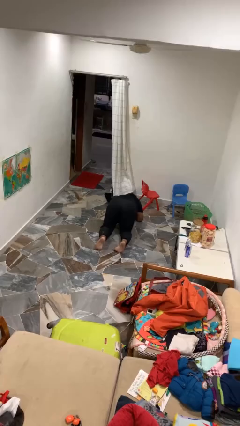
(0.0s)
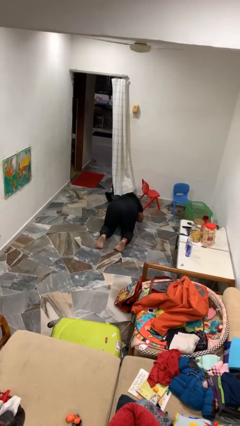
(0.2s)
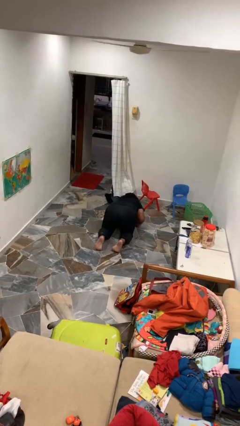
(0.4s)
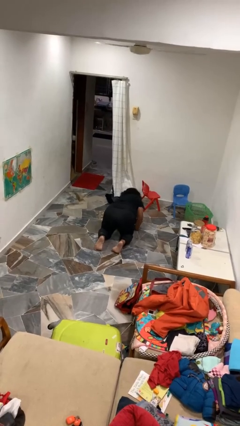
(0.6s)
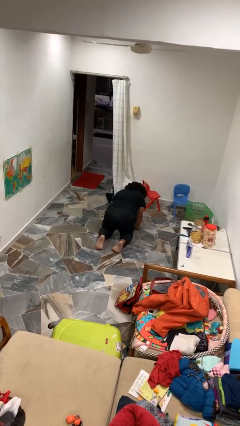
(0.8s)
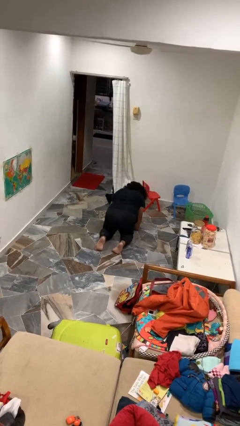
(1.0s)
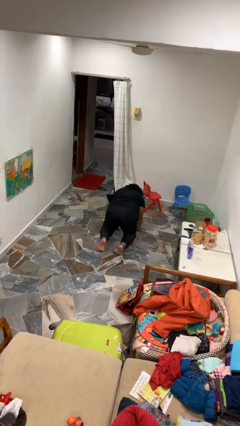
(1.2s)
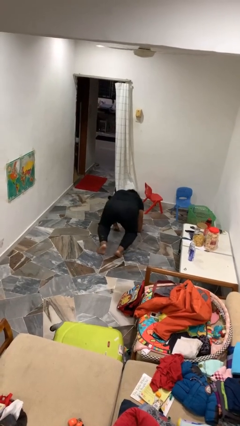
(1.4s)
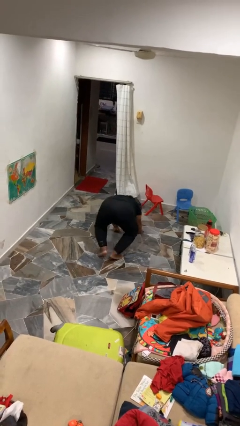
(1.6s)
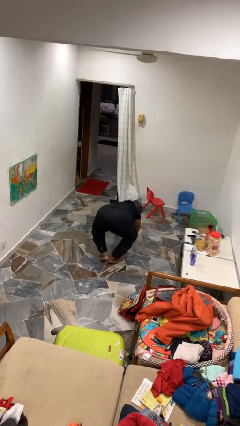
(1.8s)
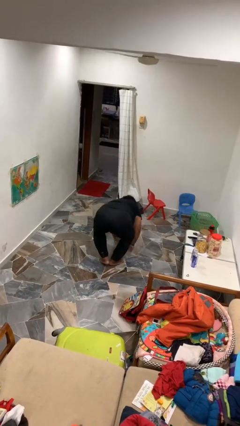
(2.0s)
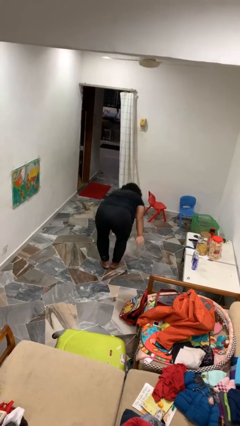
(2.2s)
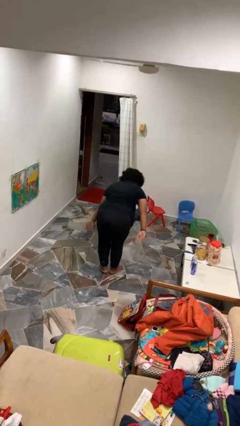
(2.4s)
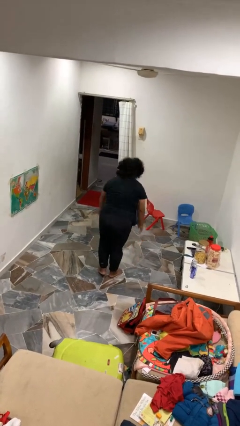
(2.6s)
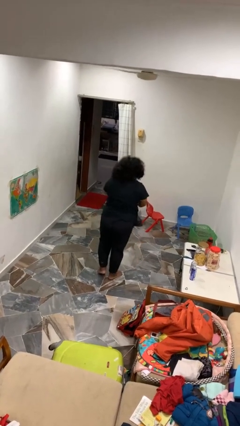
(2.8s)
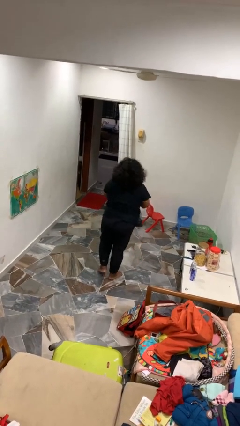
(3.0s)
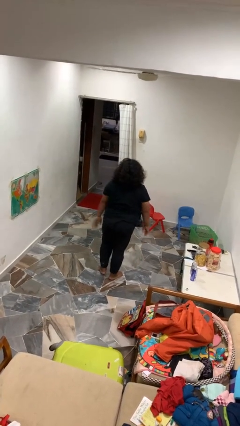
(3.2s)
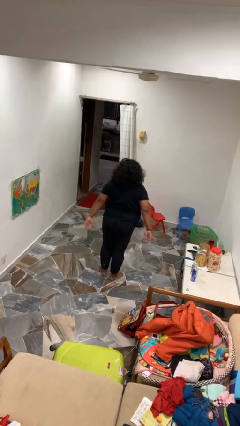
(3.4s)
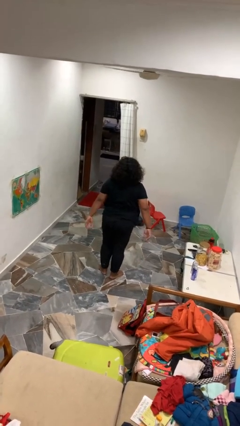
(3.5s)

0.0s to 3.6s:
person stands up from floor

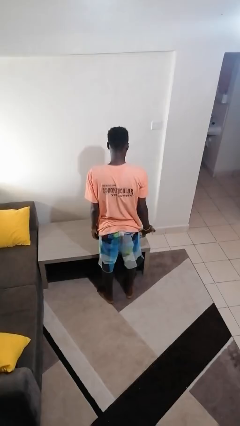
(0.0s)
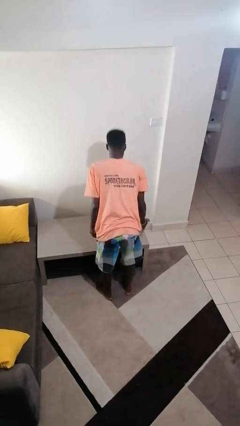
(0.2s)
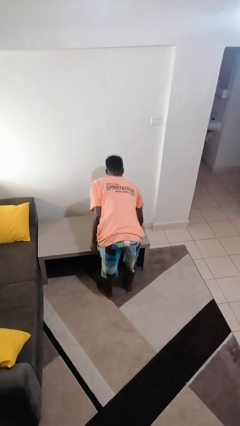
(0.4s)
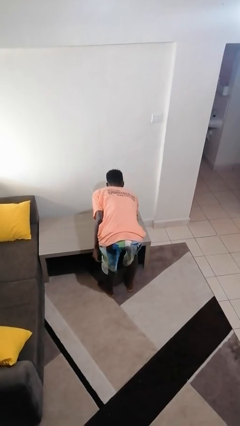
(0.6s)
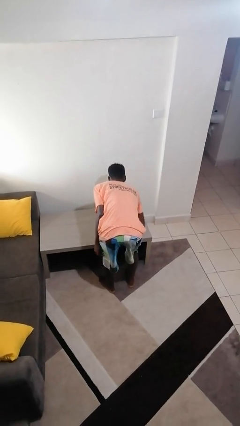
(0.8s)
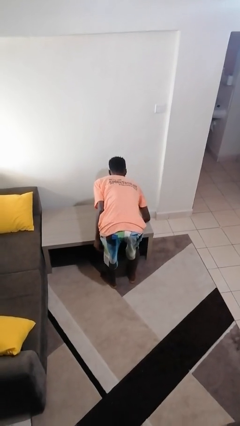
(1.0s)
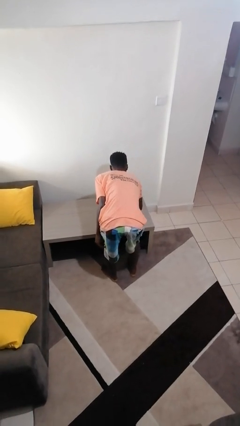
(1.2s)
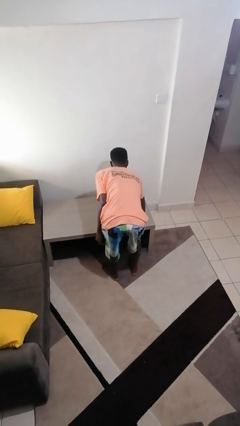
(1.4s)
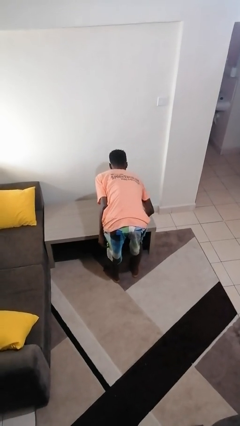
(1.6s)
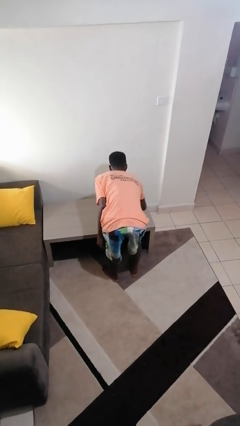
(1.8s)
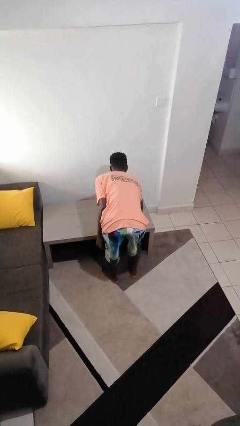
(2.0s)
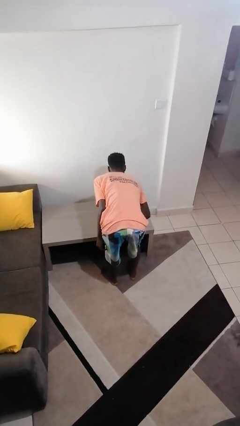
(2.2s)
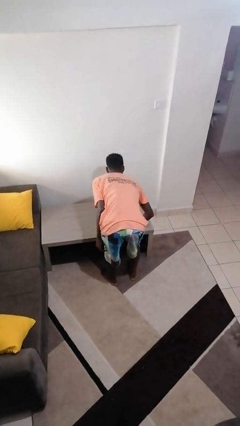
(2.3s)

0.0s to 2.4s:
person cleans table with rag

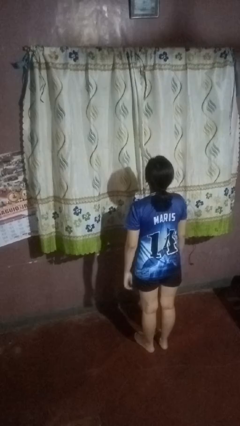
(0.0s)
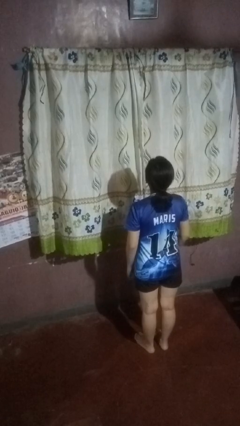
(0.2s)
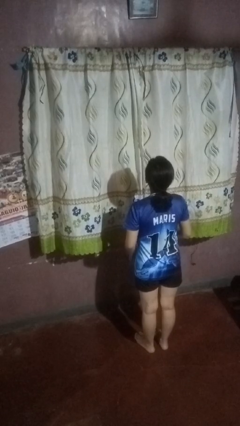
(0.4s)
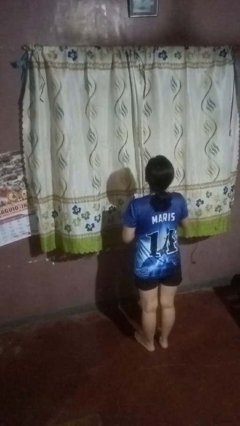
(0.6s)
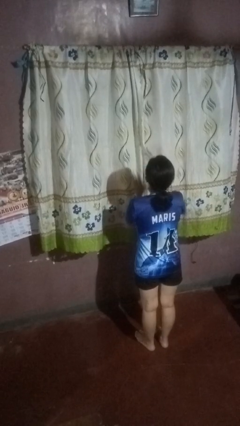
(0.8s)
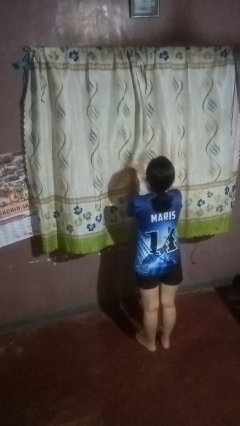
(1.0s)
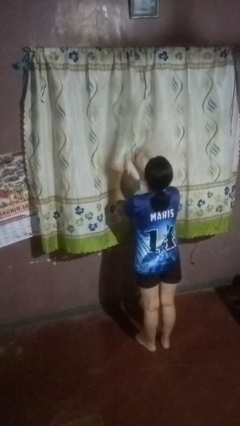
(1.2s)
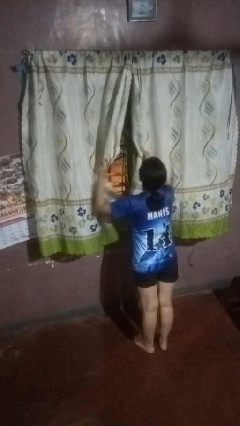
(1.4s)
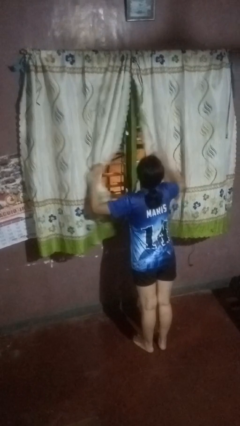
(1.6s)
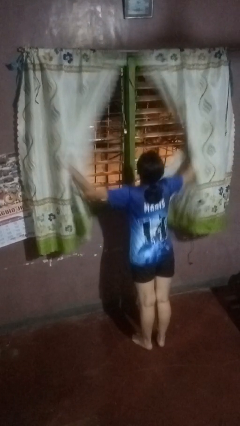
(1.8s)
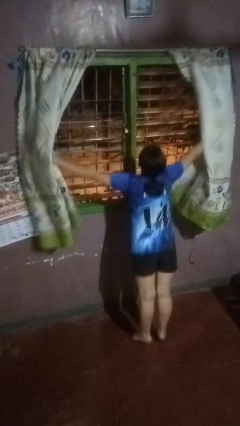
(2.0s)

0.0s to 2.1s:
person opens curtains

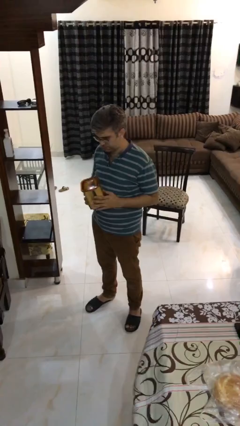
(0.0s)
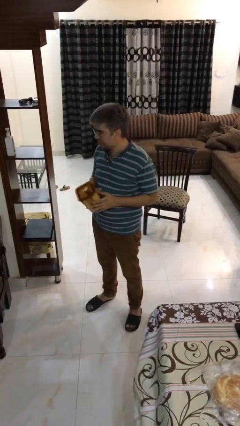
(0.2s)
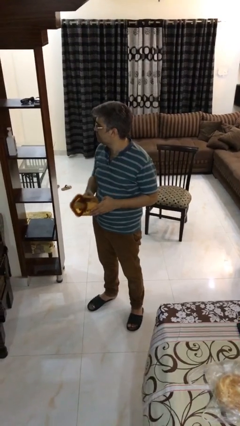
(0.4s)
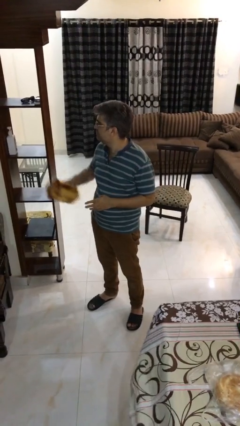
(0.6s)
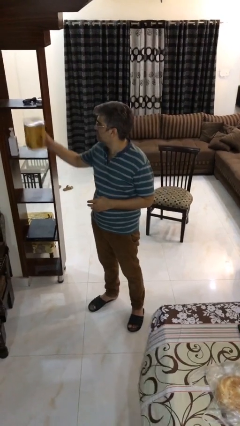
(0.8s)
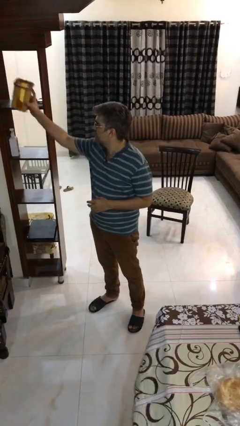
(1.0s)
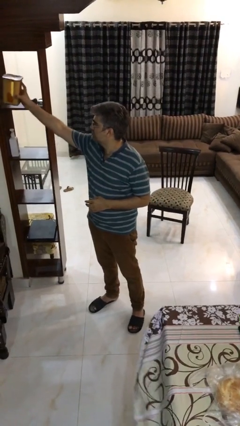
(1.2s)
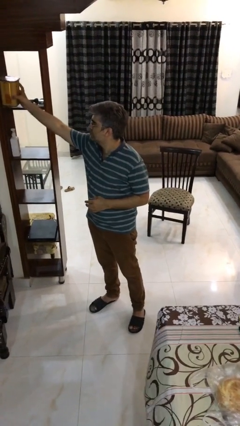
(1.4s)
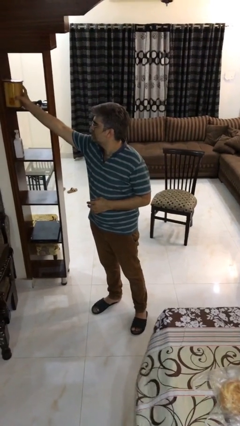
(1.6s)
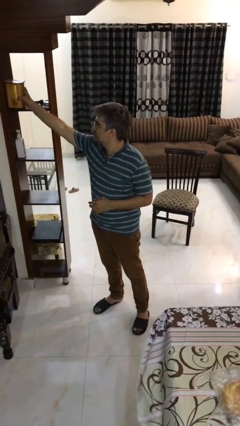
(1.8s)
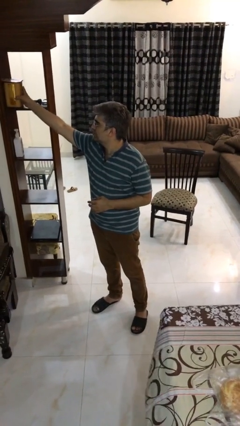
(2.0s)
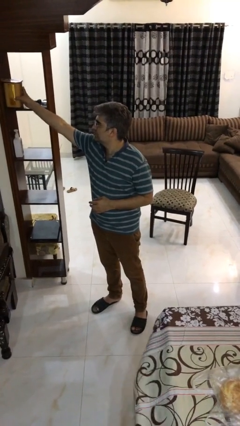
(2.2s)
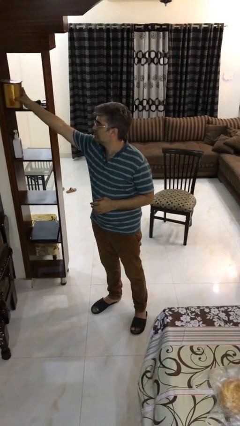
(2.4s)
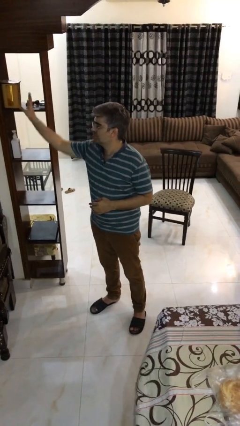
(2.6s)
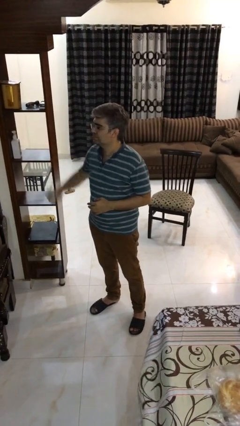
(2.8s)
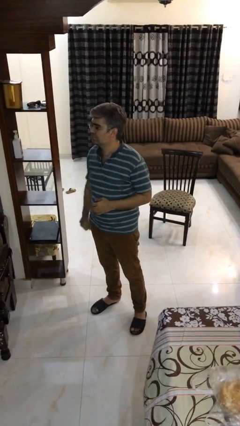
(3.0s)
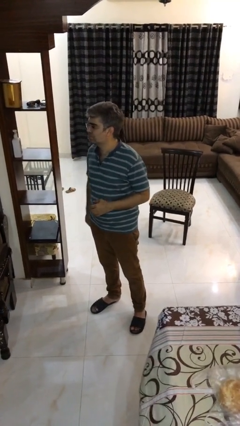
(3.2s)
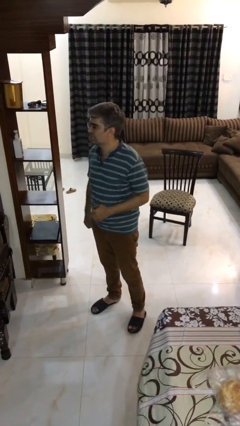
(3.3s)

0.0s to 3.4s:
person puts down object on shelf

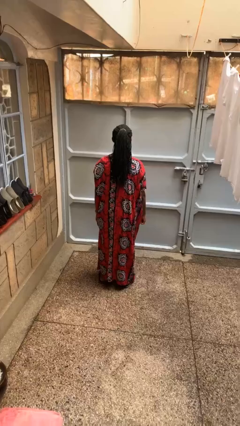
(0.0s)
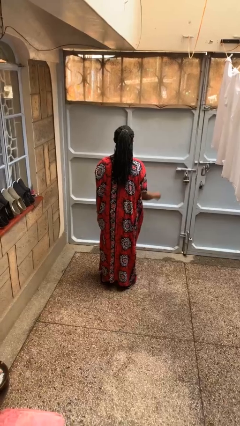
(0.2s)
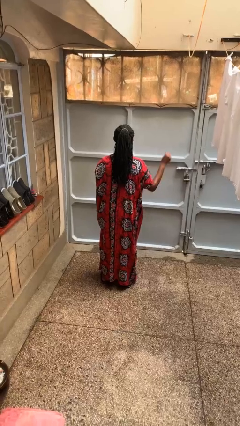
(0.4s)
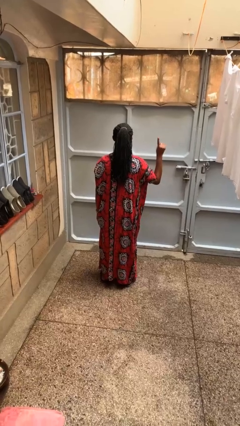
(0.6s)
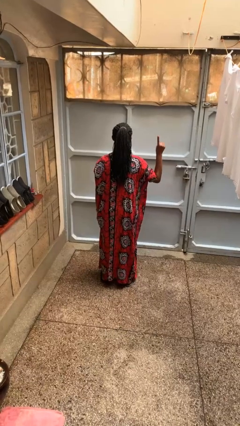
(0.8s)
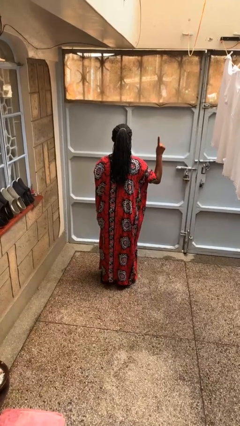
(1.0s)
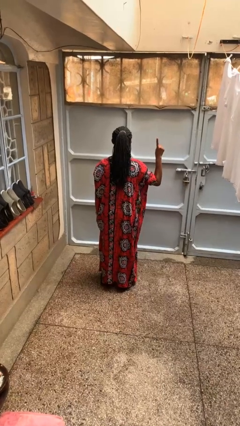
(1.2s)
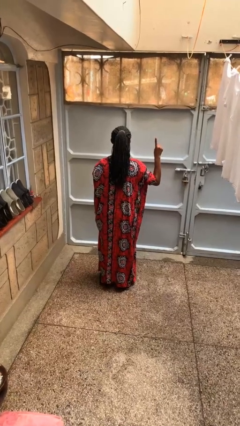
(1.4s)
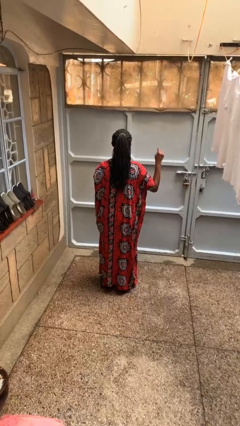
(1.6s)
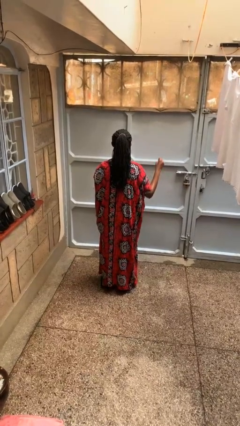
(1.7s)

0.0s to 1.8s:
person gestures number one

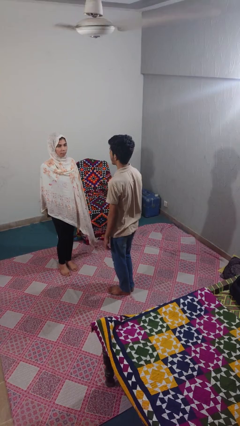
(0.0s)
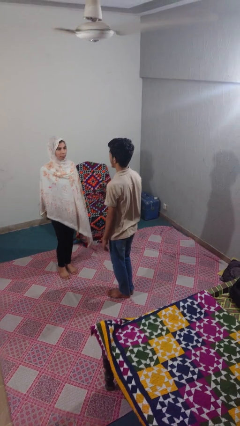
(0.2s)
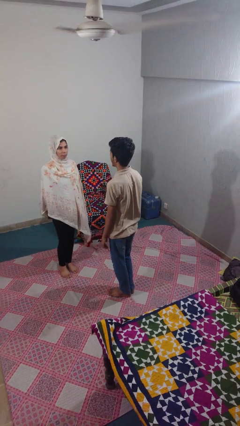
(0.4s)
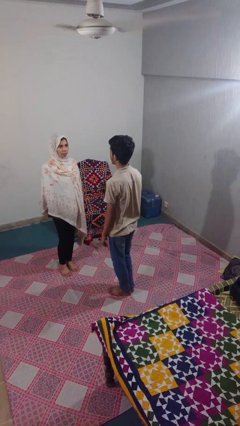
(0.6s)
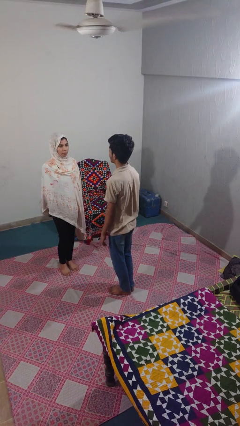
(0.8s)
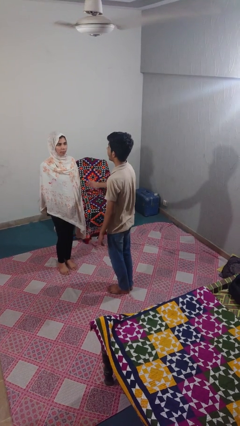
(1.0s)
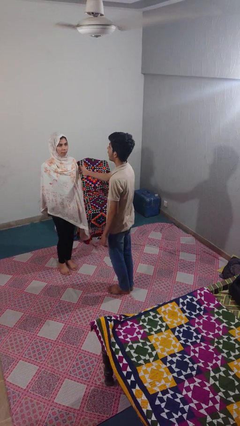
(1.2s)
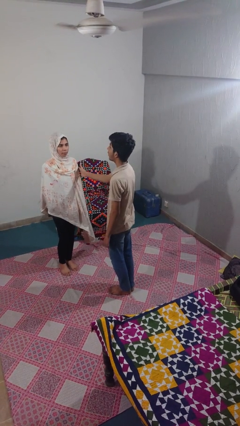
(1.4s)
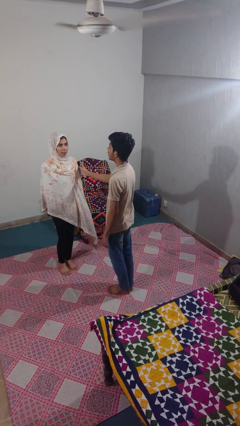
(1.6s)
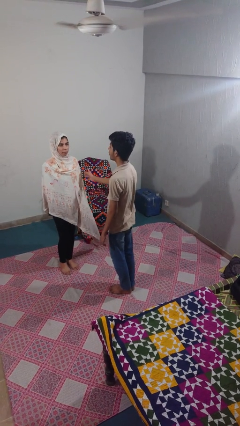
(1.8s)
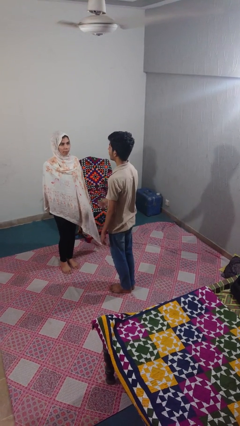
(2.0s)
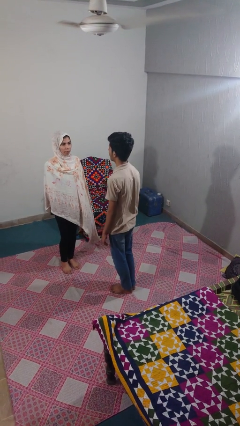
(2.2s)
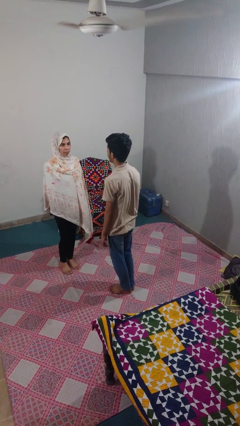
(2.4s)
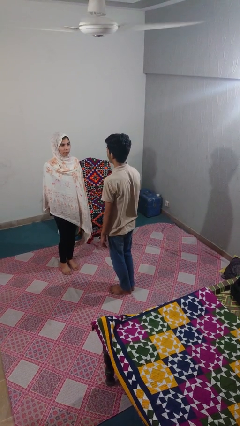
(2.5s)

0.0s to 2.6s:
person shoves person

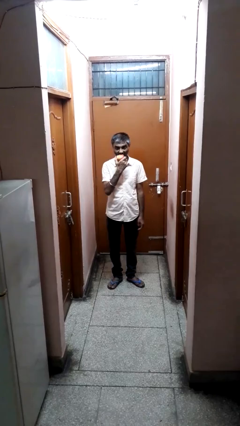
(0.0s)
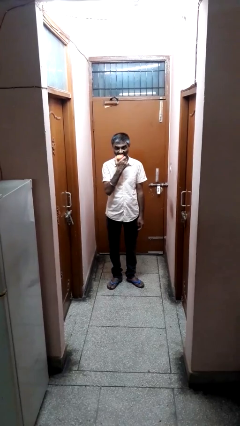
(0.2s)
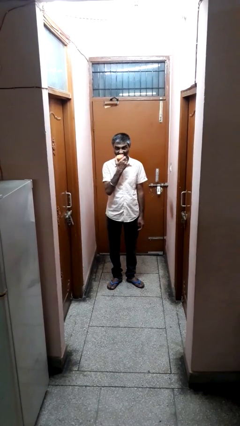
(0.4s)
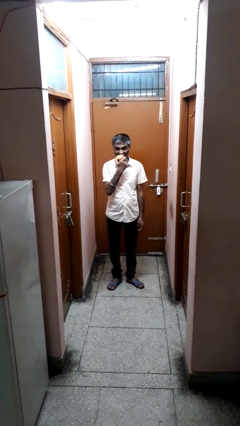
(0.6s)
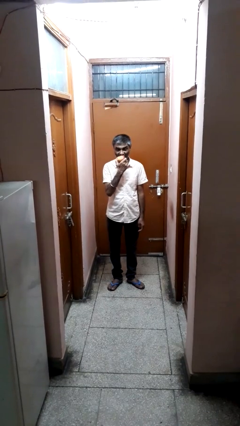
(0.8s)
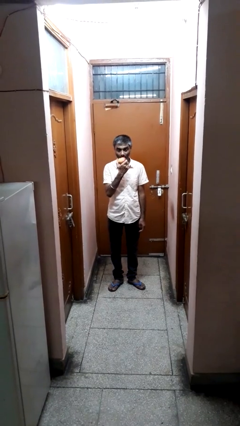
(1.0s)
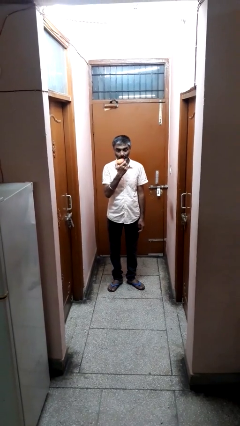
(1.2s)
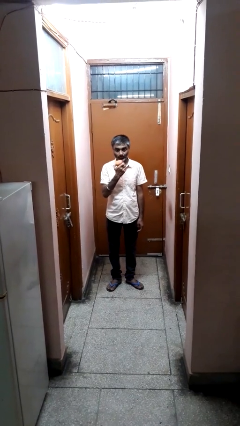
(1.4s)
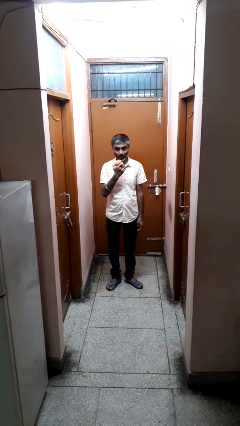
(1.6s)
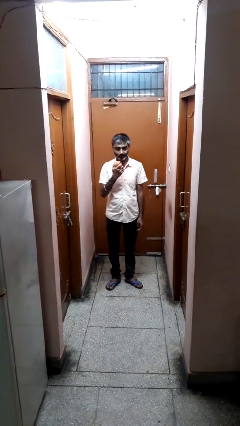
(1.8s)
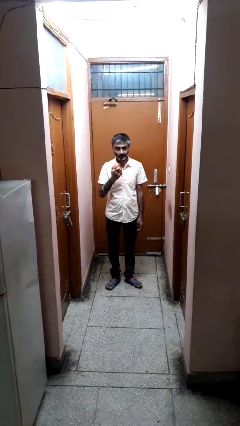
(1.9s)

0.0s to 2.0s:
person eats apple
